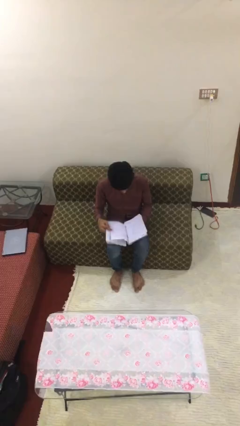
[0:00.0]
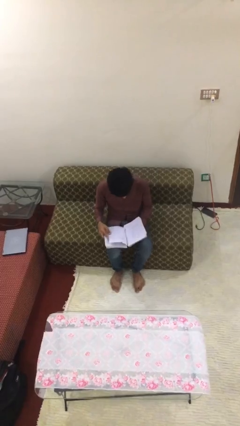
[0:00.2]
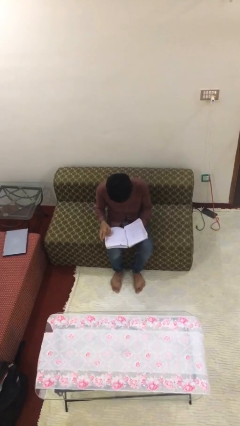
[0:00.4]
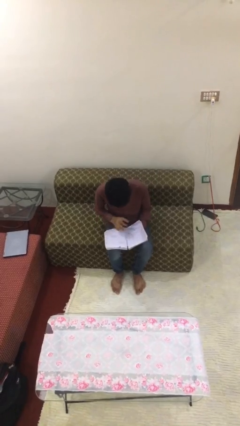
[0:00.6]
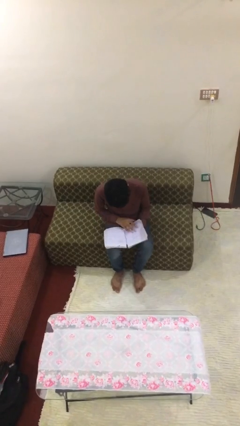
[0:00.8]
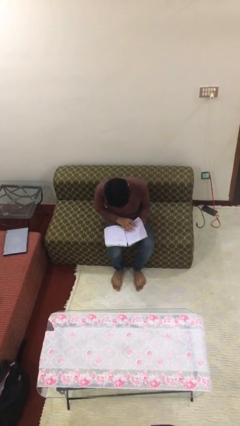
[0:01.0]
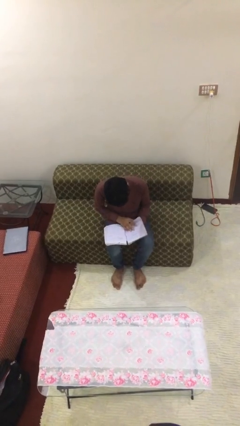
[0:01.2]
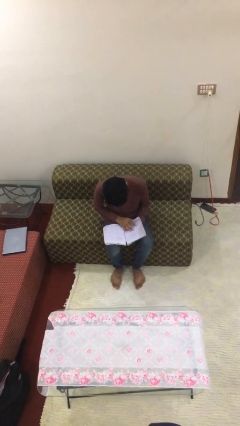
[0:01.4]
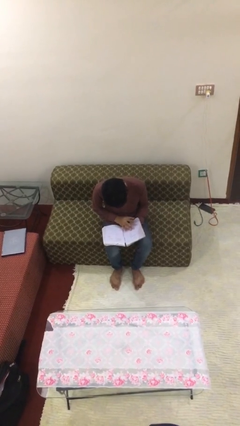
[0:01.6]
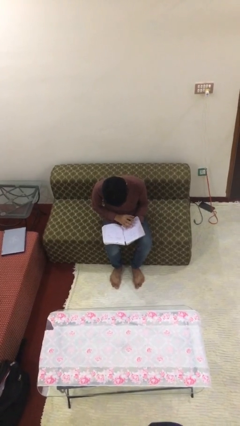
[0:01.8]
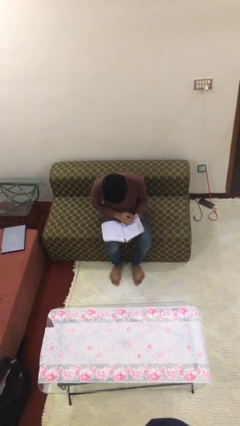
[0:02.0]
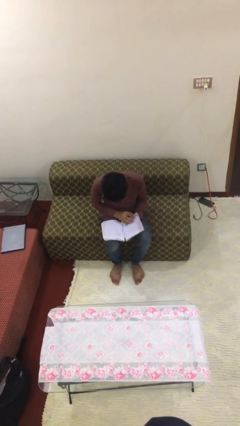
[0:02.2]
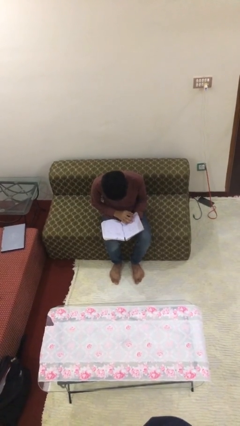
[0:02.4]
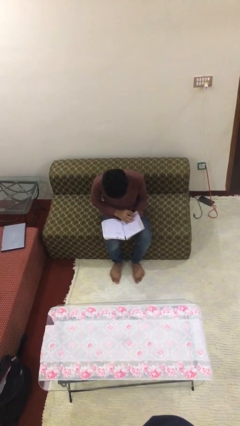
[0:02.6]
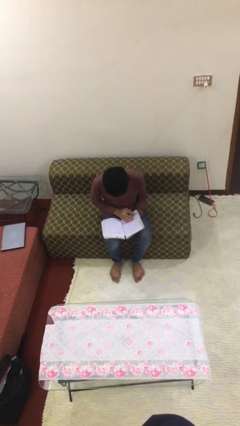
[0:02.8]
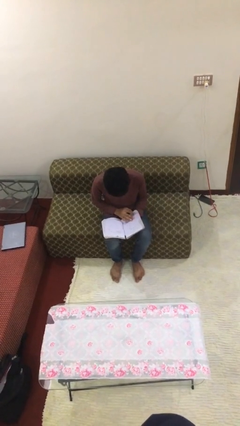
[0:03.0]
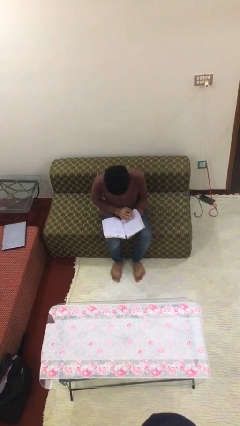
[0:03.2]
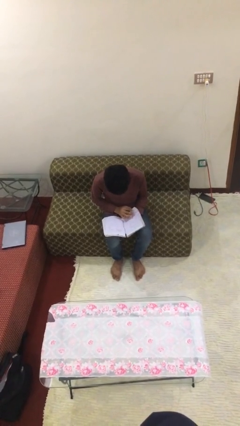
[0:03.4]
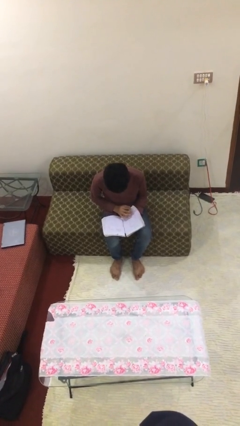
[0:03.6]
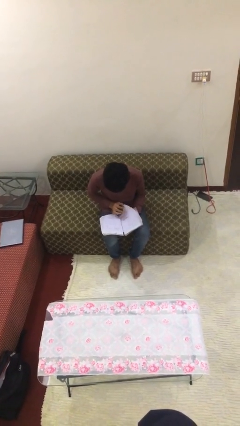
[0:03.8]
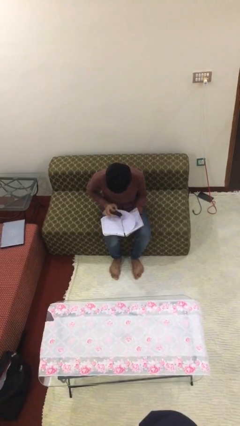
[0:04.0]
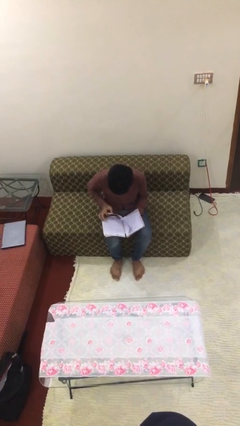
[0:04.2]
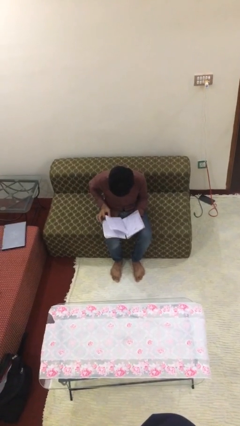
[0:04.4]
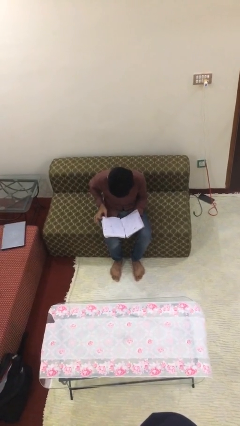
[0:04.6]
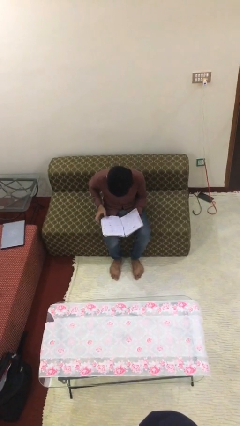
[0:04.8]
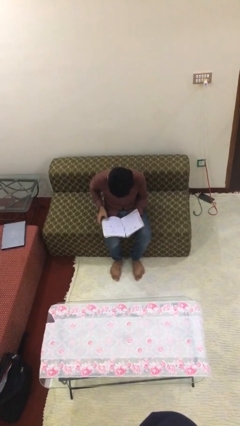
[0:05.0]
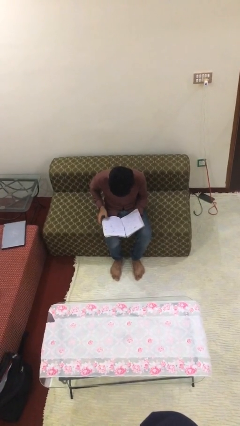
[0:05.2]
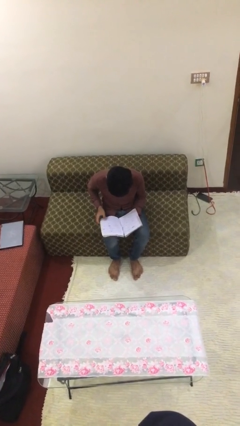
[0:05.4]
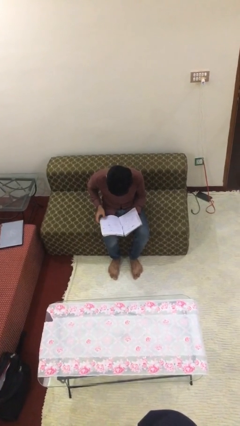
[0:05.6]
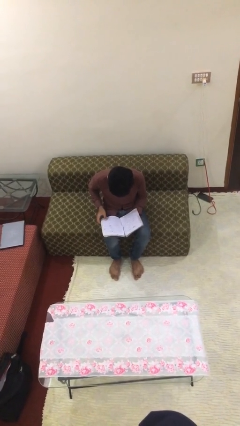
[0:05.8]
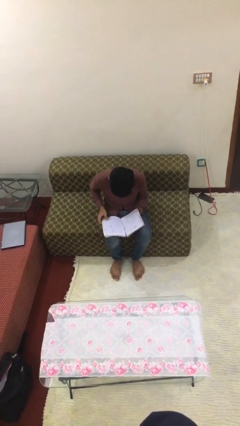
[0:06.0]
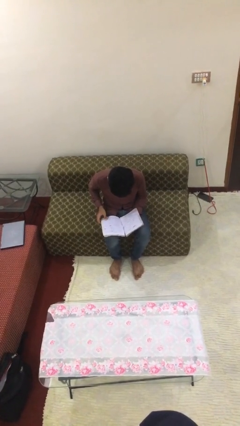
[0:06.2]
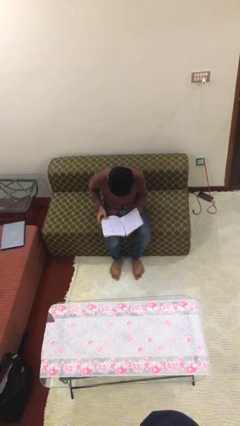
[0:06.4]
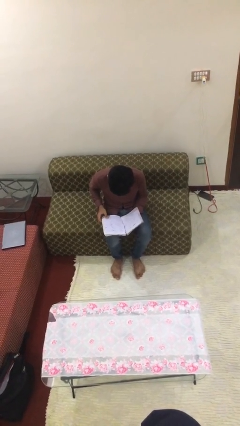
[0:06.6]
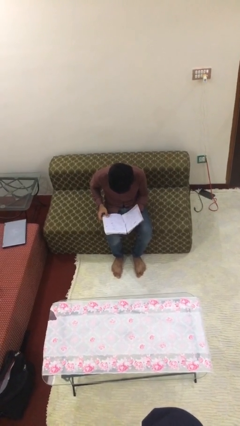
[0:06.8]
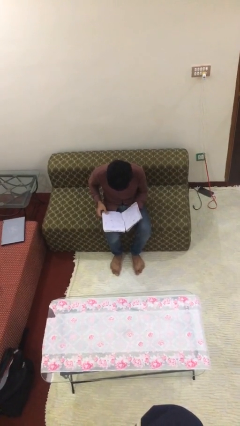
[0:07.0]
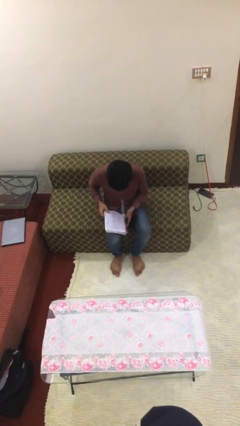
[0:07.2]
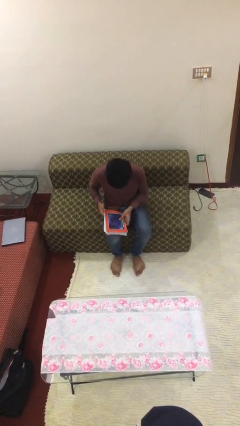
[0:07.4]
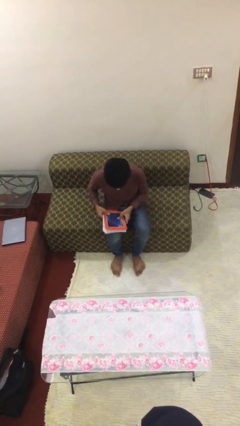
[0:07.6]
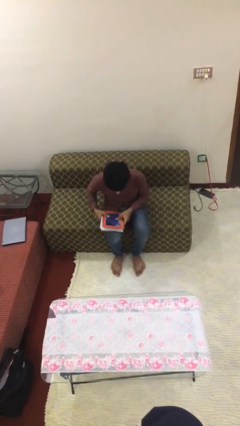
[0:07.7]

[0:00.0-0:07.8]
person reads document

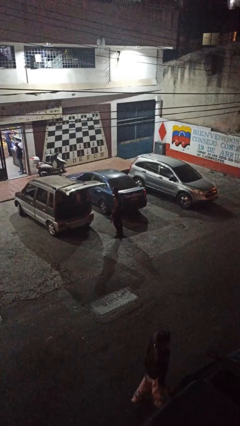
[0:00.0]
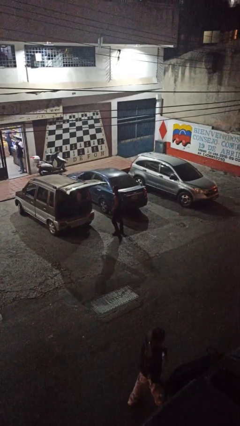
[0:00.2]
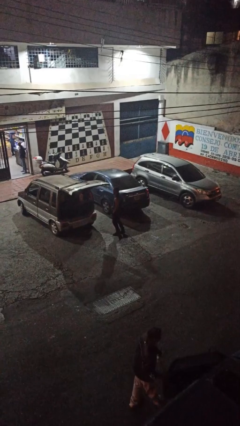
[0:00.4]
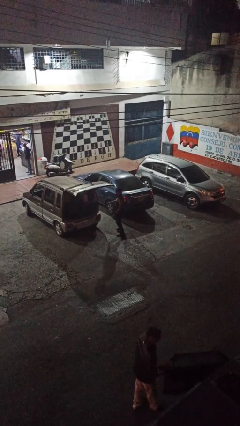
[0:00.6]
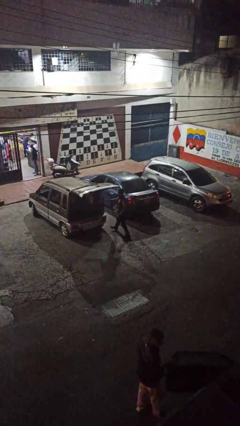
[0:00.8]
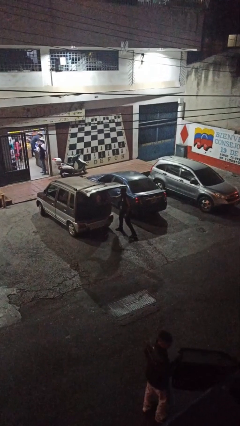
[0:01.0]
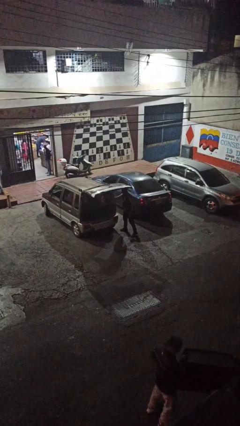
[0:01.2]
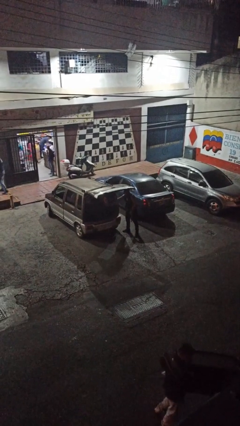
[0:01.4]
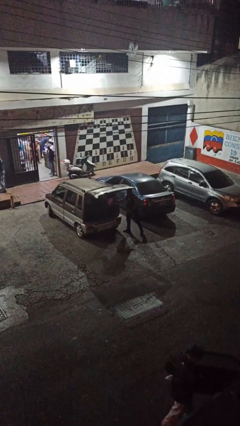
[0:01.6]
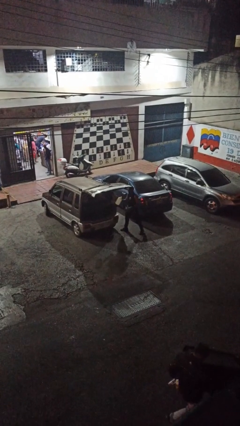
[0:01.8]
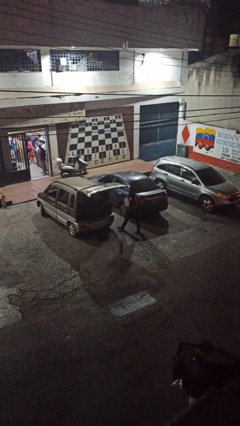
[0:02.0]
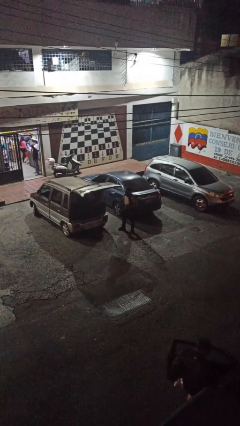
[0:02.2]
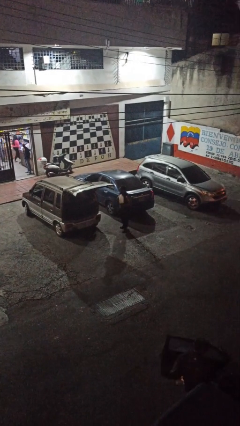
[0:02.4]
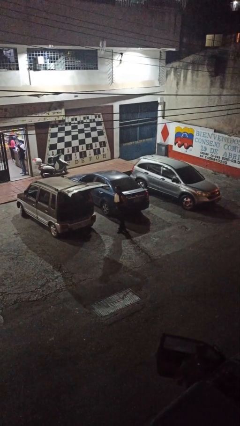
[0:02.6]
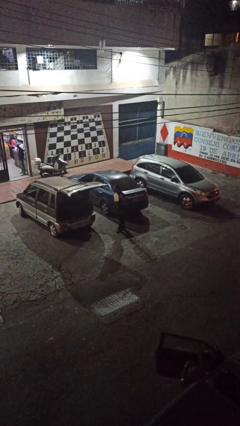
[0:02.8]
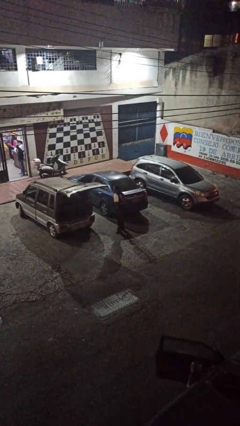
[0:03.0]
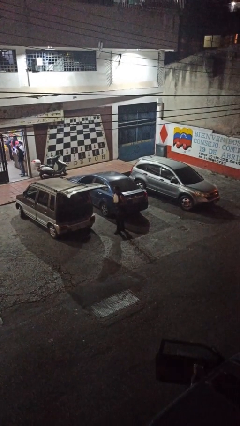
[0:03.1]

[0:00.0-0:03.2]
person unloads car

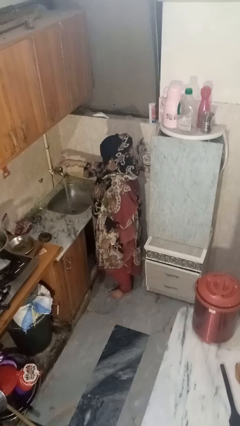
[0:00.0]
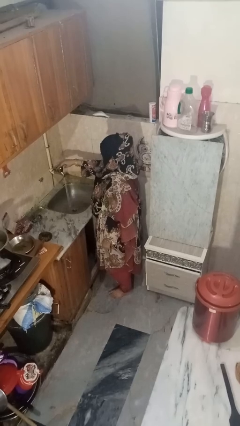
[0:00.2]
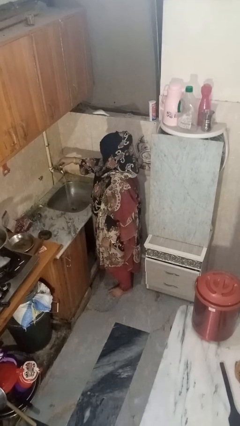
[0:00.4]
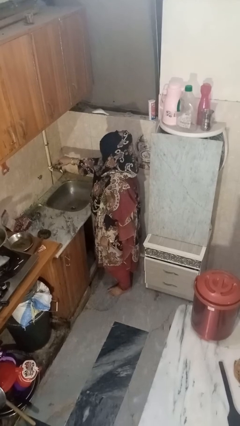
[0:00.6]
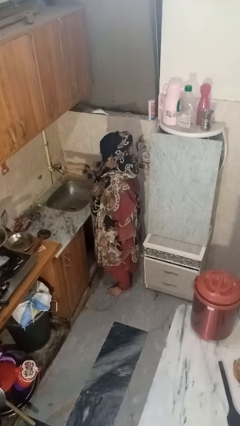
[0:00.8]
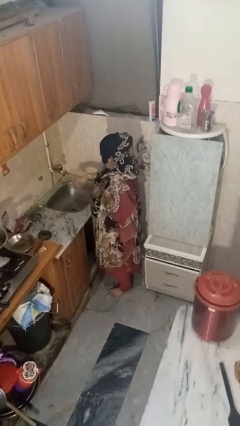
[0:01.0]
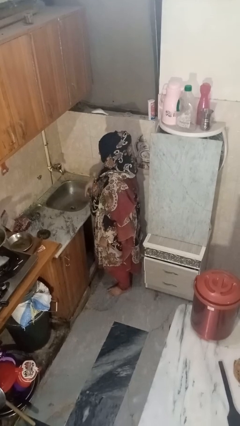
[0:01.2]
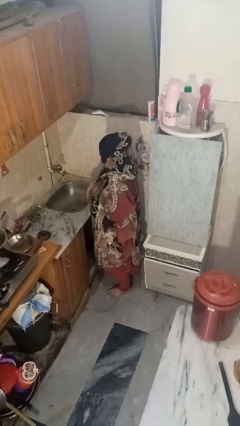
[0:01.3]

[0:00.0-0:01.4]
person turns off faucet

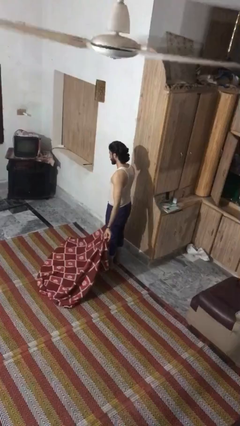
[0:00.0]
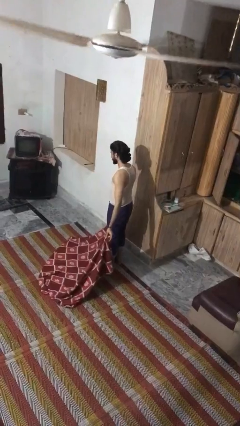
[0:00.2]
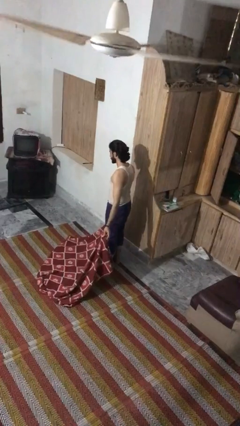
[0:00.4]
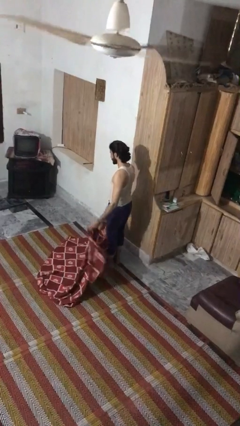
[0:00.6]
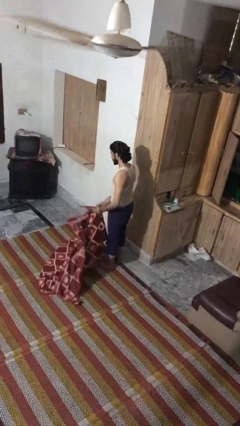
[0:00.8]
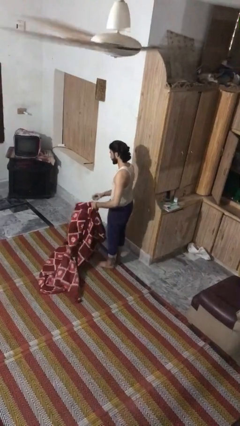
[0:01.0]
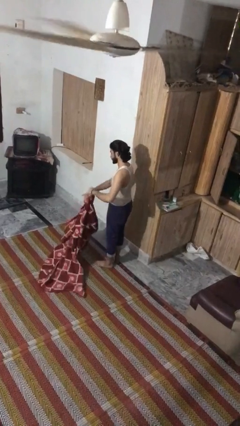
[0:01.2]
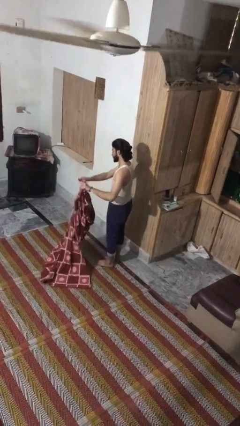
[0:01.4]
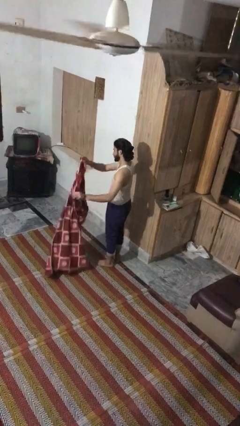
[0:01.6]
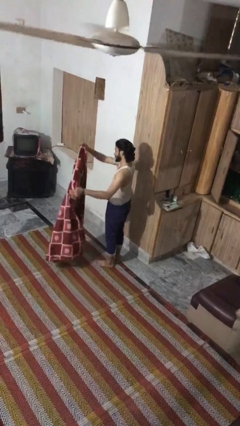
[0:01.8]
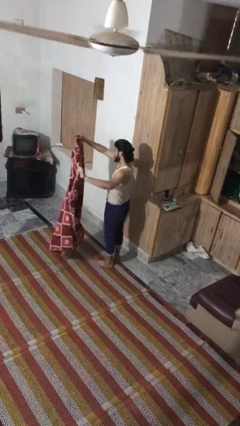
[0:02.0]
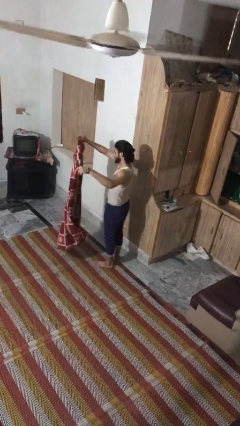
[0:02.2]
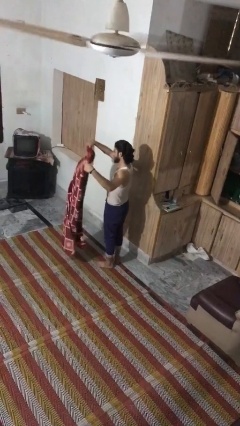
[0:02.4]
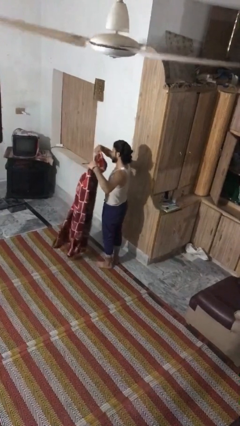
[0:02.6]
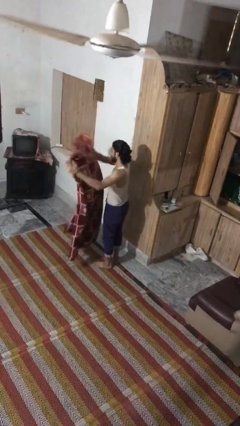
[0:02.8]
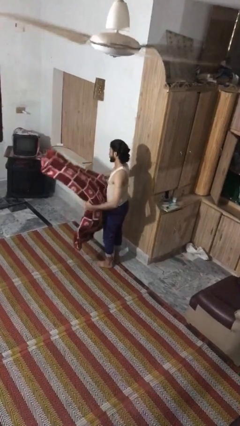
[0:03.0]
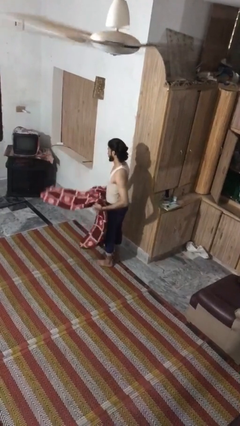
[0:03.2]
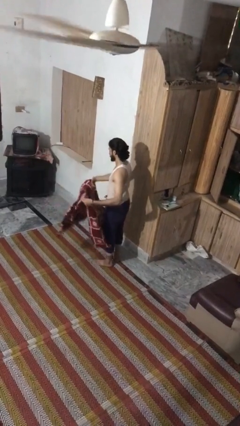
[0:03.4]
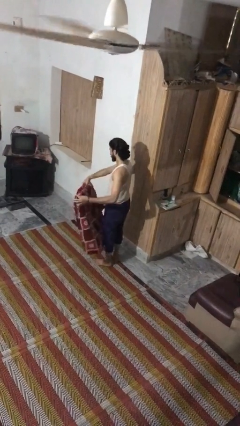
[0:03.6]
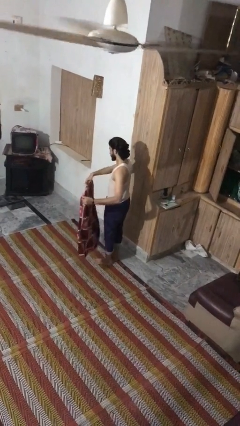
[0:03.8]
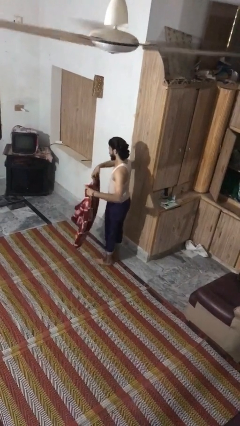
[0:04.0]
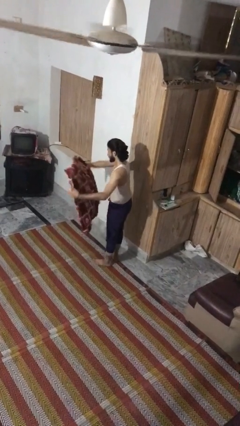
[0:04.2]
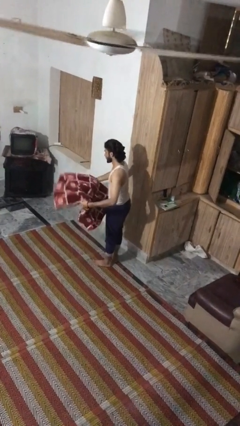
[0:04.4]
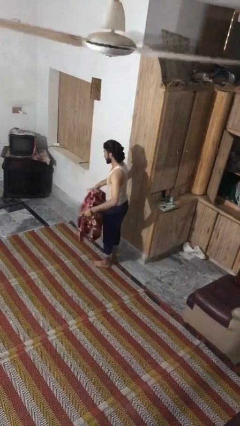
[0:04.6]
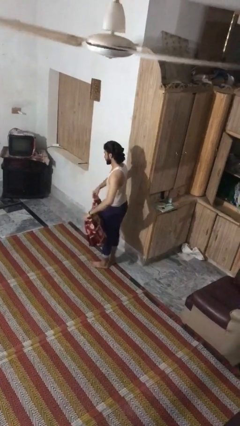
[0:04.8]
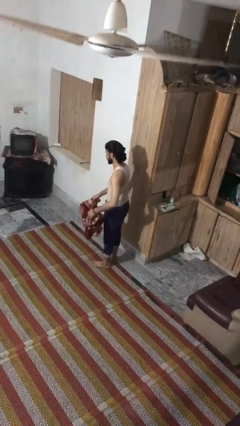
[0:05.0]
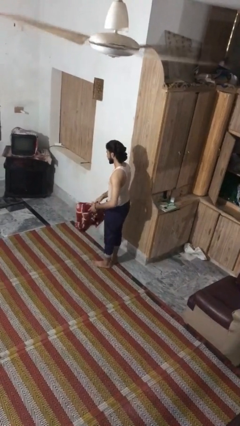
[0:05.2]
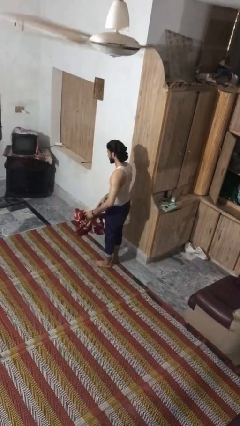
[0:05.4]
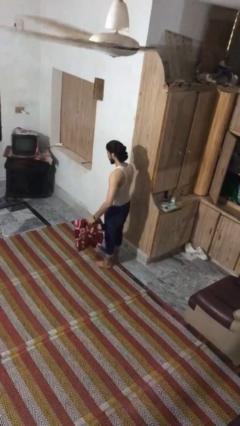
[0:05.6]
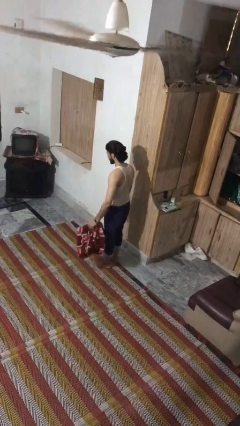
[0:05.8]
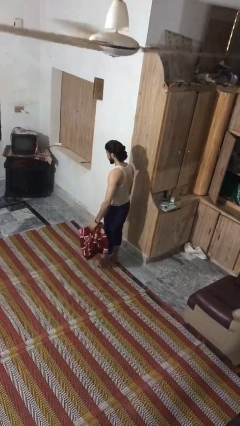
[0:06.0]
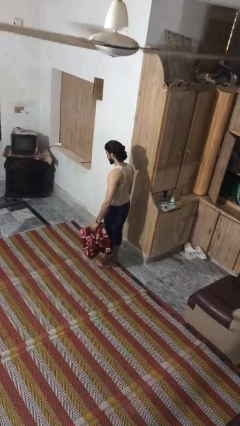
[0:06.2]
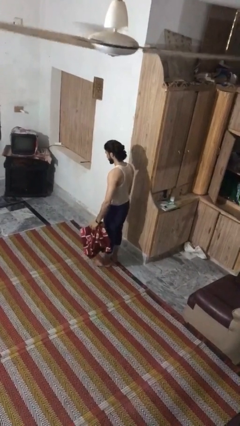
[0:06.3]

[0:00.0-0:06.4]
person folds blanket
